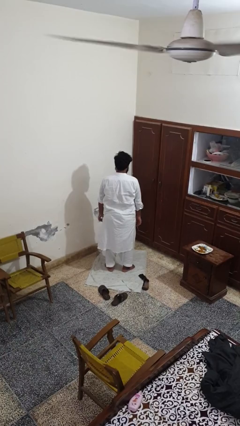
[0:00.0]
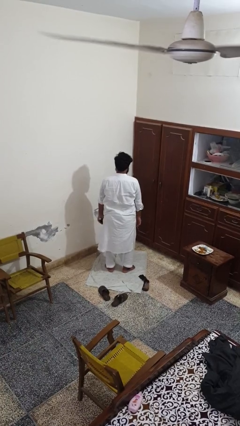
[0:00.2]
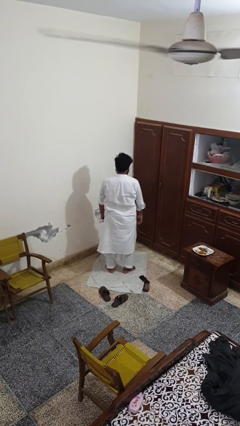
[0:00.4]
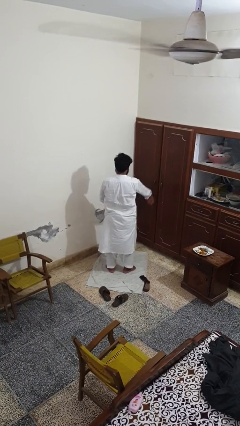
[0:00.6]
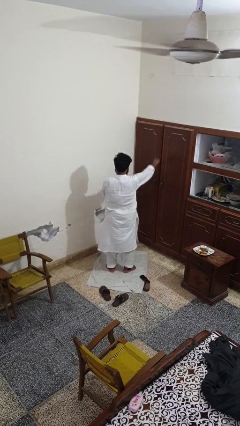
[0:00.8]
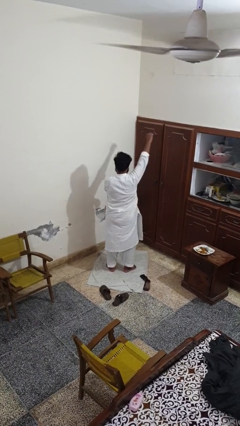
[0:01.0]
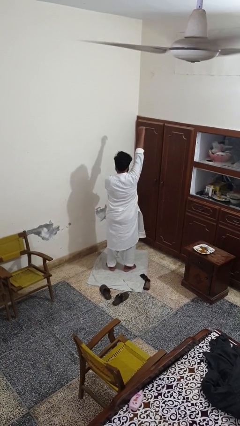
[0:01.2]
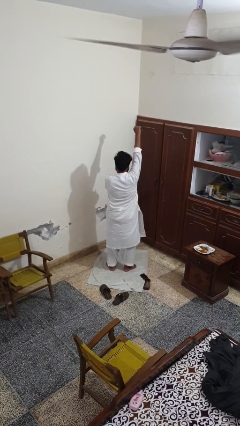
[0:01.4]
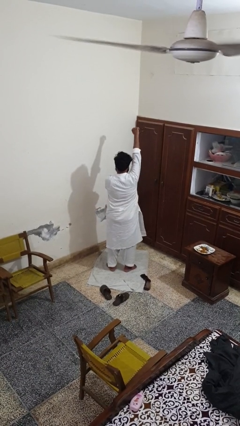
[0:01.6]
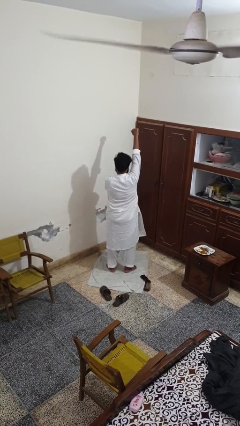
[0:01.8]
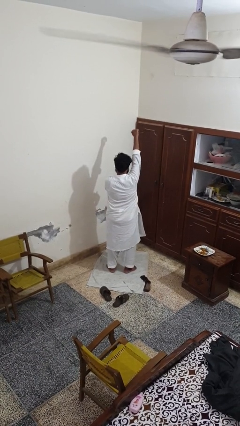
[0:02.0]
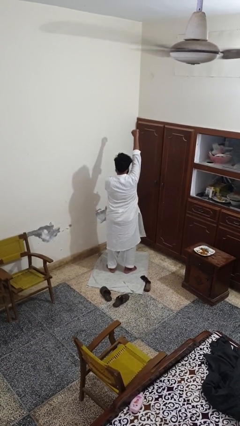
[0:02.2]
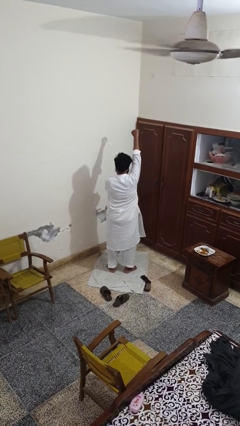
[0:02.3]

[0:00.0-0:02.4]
person applies deodorant

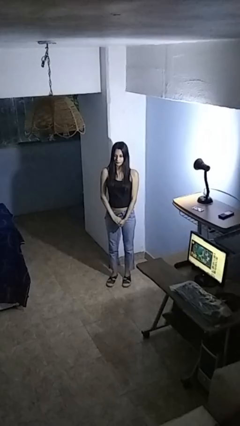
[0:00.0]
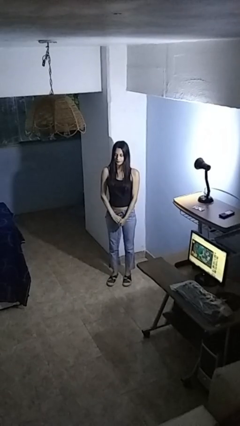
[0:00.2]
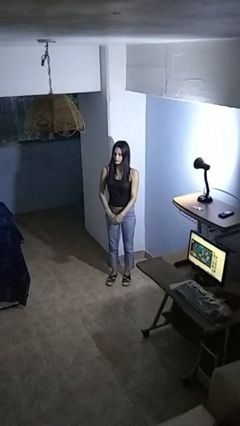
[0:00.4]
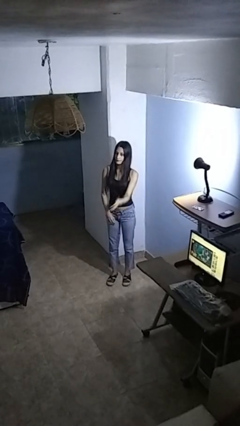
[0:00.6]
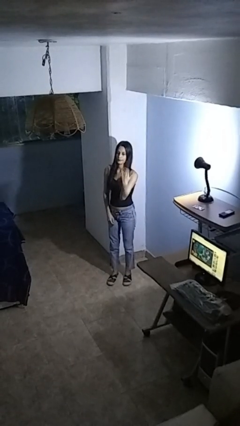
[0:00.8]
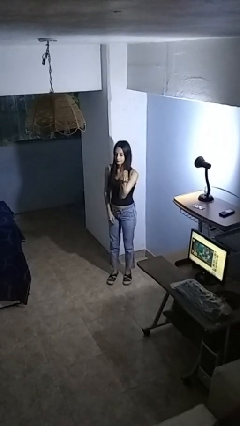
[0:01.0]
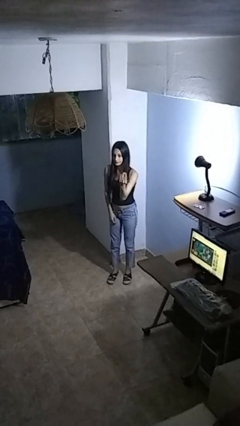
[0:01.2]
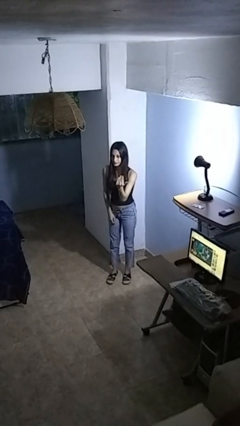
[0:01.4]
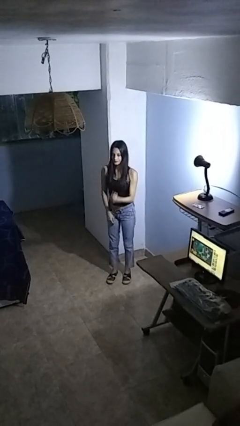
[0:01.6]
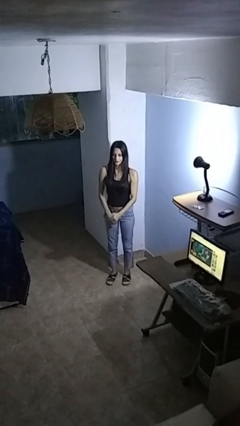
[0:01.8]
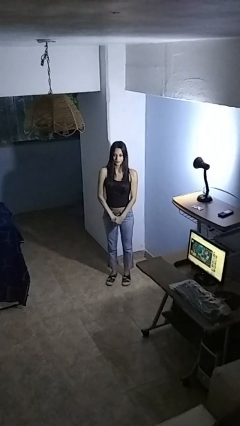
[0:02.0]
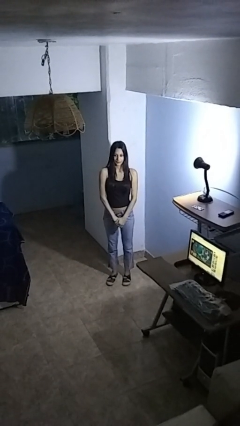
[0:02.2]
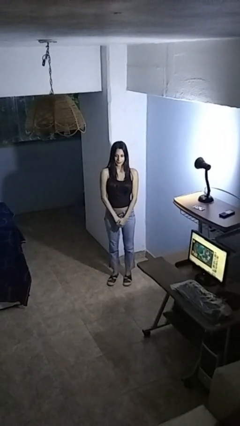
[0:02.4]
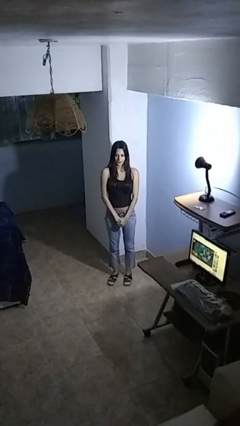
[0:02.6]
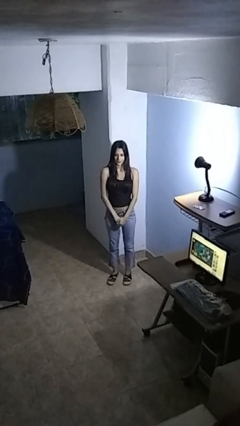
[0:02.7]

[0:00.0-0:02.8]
person gestures come here

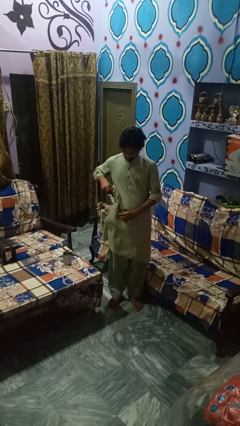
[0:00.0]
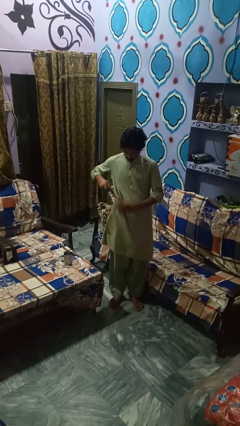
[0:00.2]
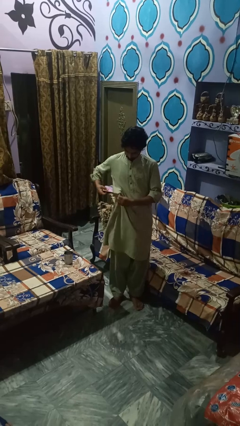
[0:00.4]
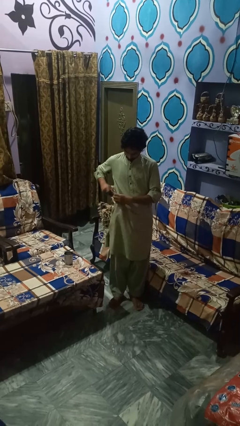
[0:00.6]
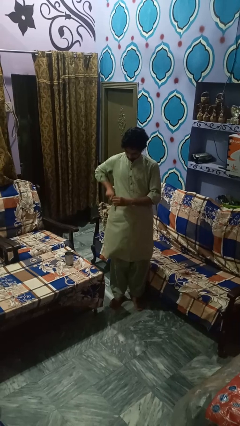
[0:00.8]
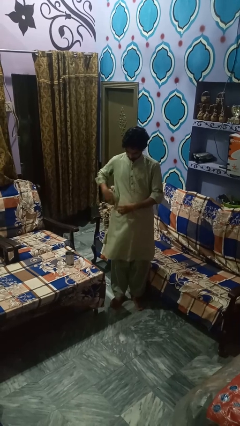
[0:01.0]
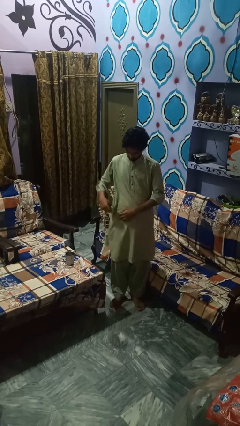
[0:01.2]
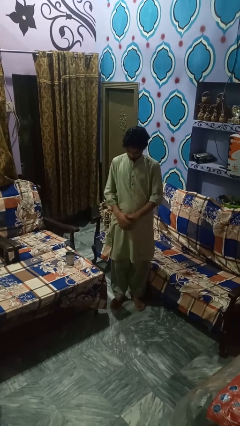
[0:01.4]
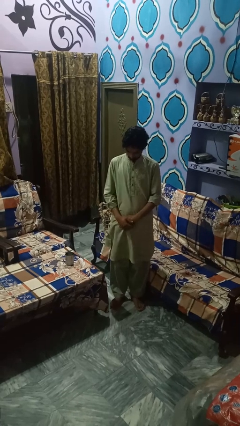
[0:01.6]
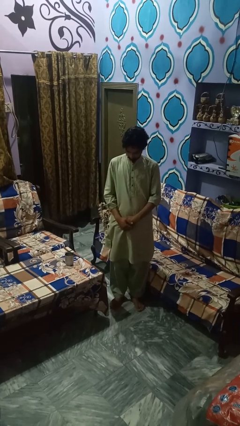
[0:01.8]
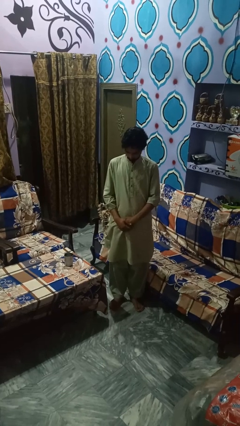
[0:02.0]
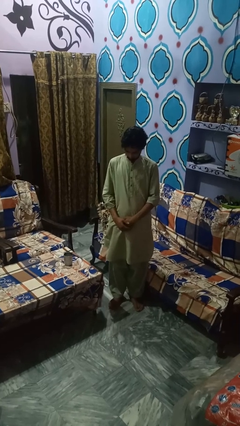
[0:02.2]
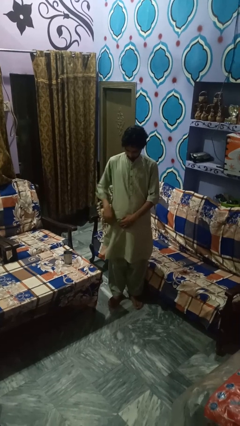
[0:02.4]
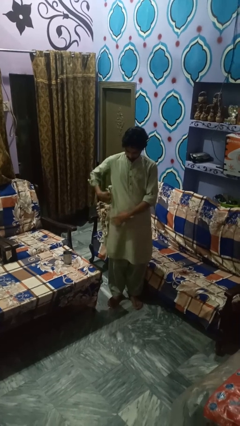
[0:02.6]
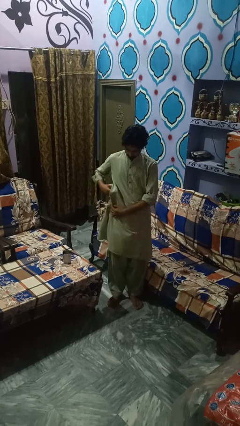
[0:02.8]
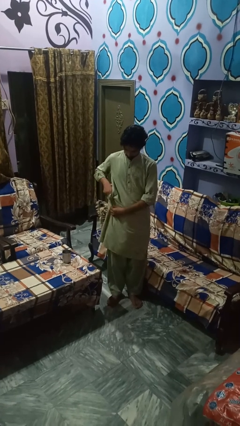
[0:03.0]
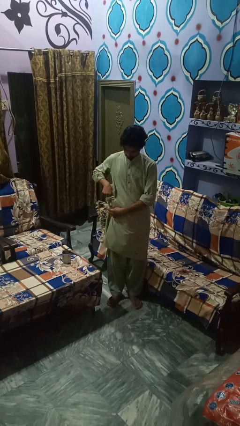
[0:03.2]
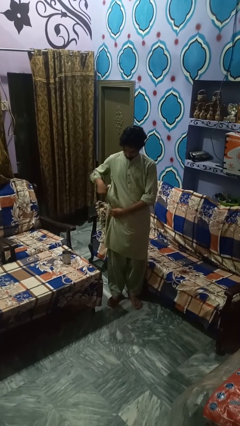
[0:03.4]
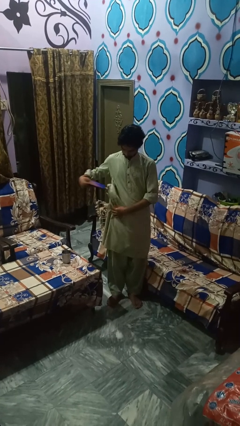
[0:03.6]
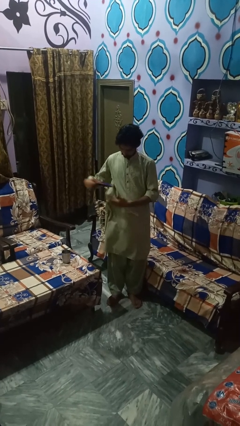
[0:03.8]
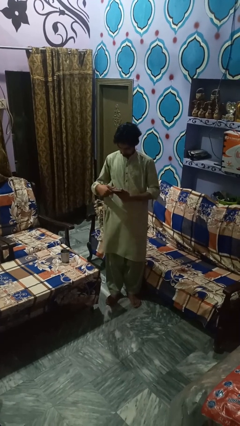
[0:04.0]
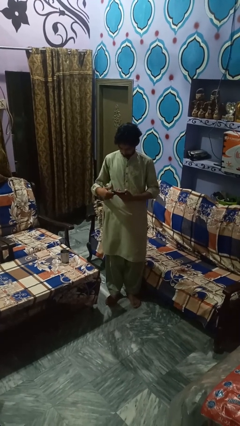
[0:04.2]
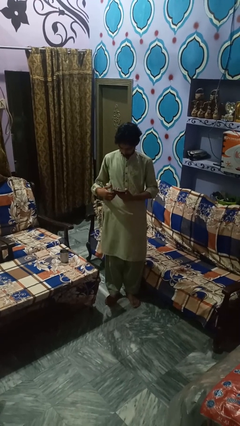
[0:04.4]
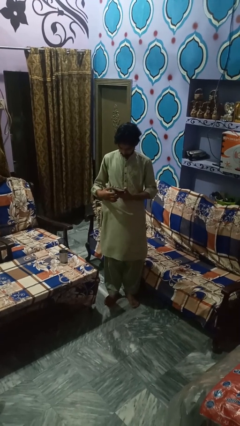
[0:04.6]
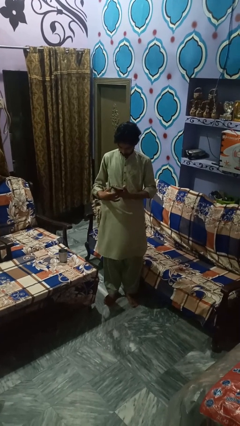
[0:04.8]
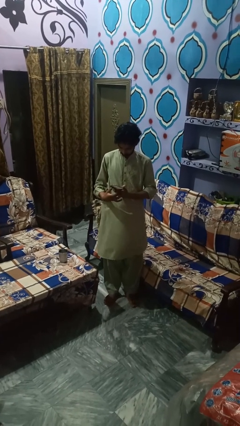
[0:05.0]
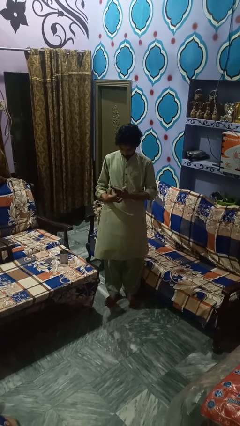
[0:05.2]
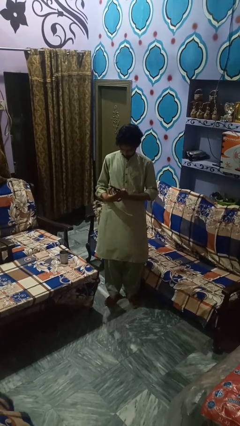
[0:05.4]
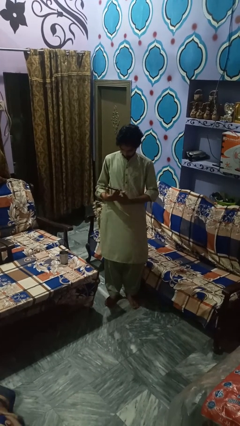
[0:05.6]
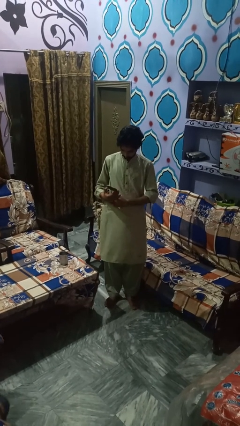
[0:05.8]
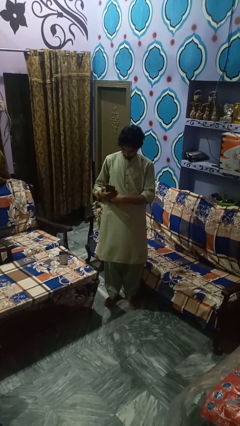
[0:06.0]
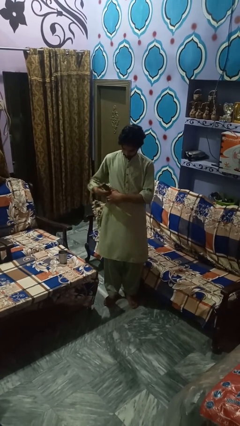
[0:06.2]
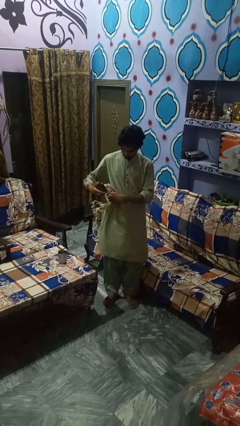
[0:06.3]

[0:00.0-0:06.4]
person takes phone from pocket

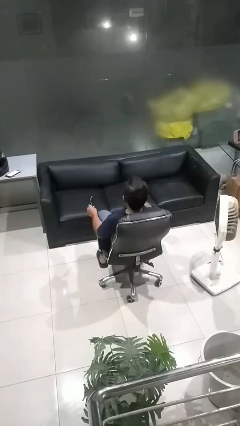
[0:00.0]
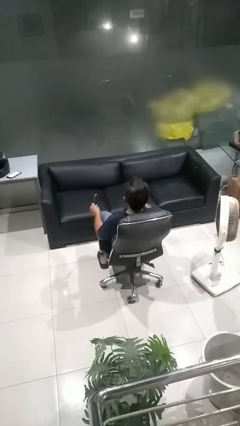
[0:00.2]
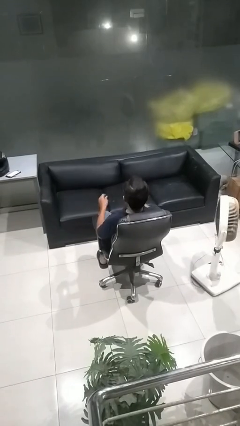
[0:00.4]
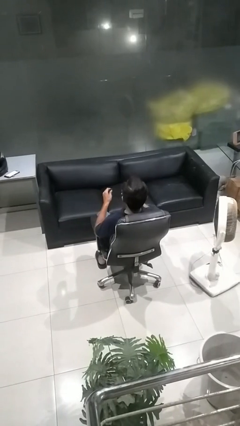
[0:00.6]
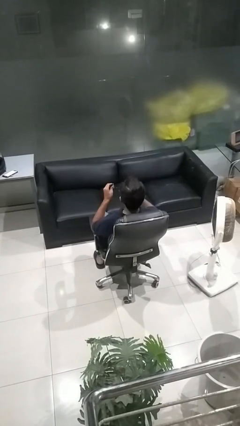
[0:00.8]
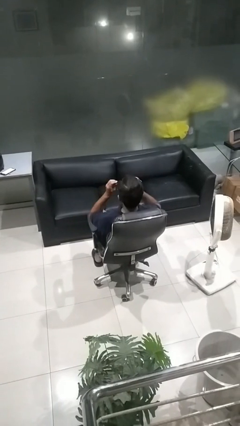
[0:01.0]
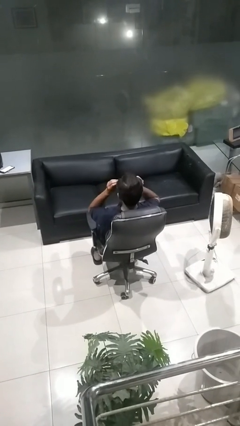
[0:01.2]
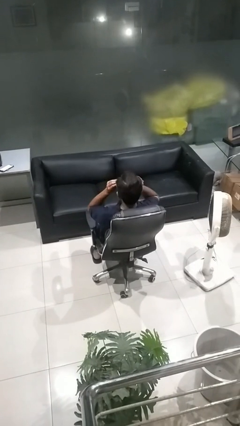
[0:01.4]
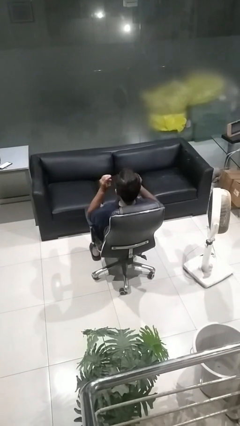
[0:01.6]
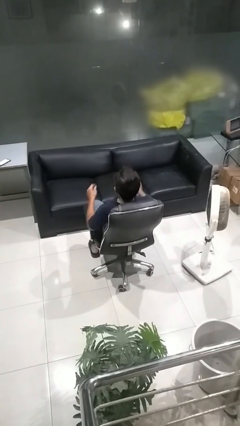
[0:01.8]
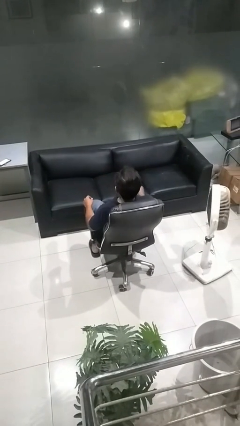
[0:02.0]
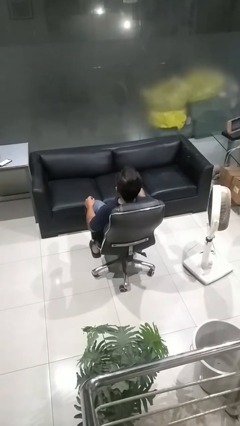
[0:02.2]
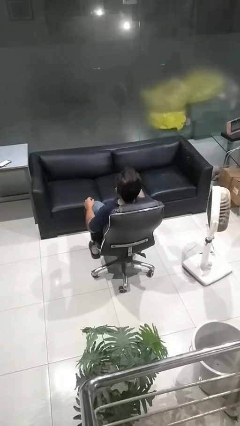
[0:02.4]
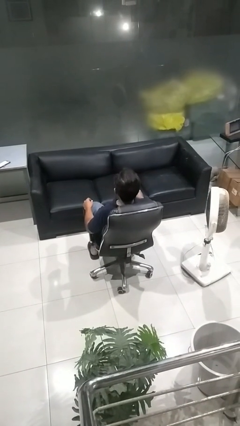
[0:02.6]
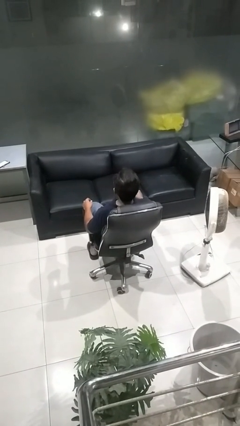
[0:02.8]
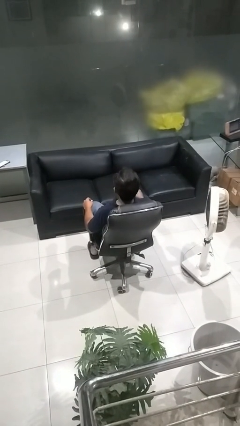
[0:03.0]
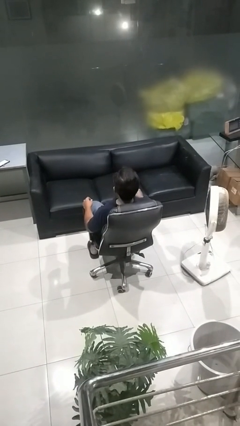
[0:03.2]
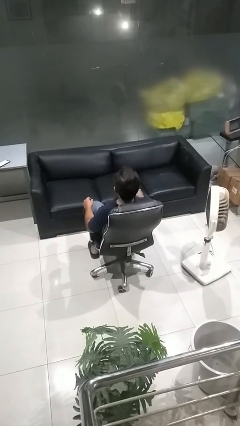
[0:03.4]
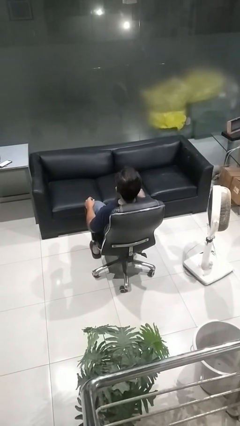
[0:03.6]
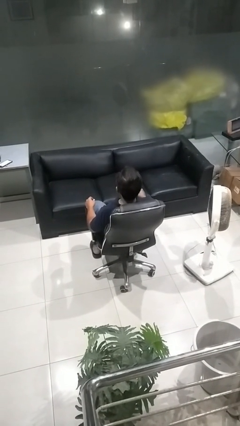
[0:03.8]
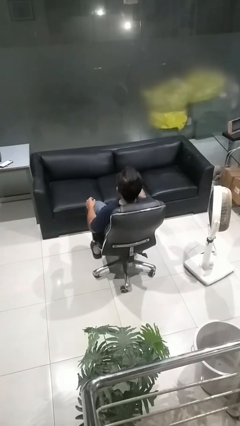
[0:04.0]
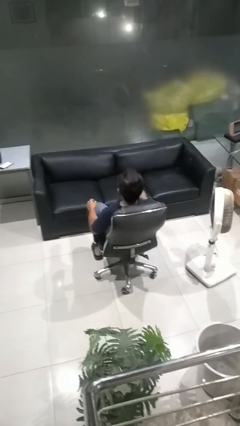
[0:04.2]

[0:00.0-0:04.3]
person puts on sunglasses

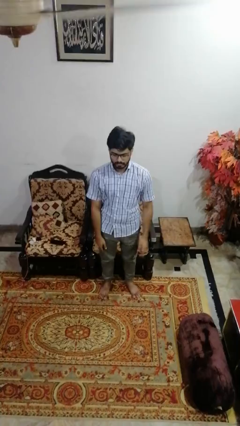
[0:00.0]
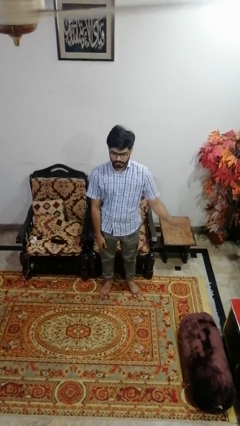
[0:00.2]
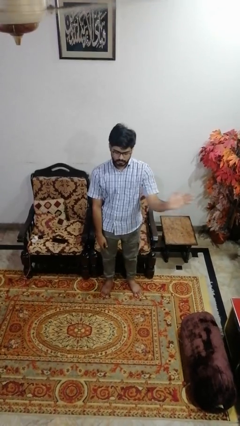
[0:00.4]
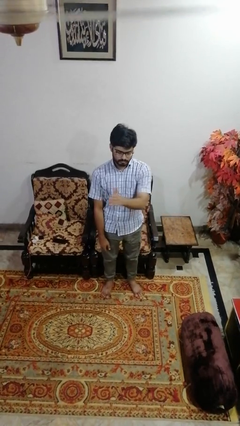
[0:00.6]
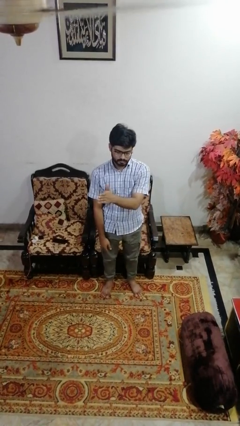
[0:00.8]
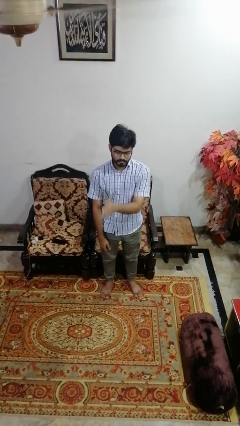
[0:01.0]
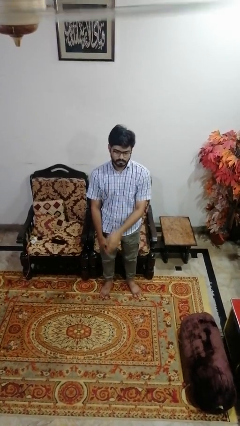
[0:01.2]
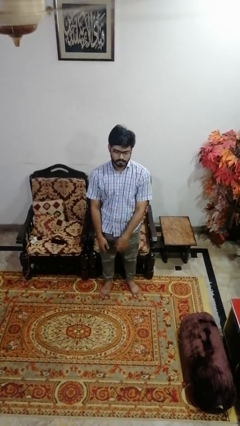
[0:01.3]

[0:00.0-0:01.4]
person gestures swipe right

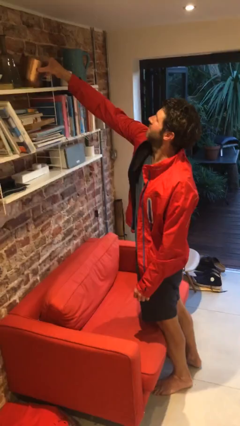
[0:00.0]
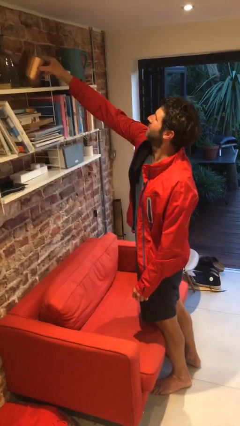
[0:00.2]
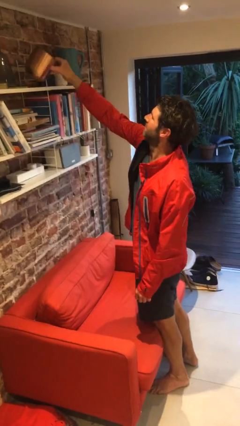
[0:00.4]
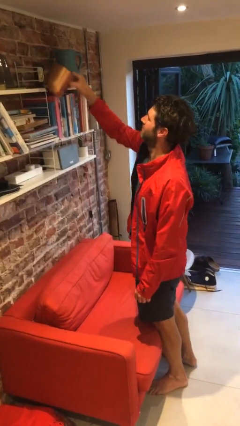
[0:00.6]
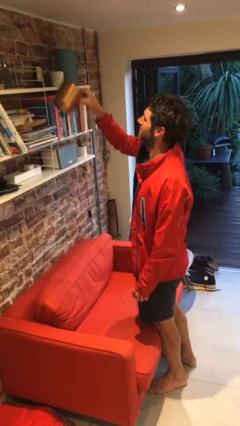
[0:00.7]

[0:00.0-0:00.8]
person picks up object from shelf
